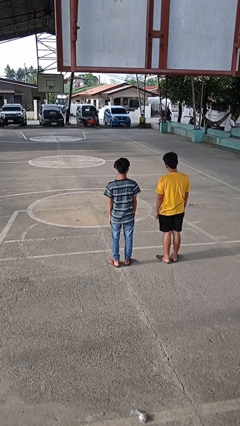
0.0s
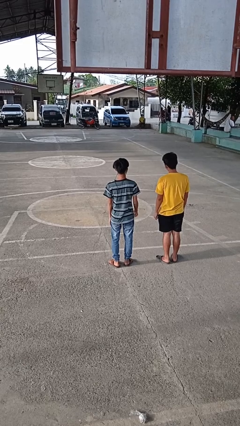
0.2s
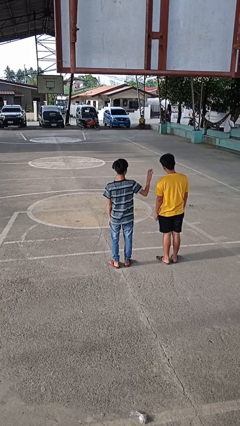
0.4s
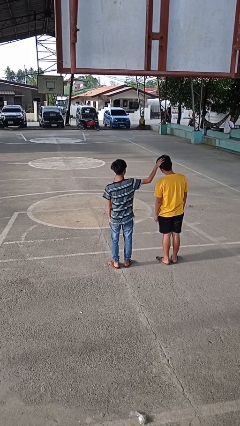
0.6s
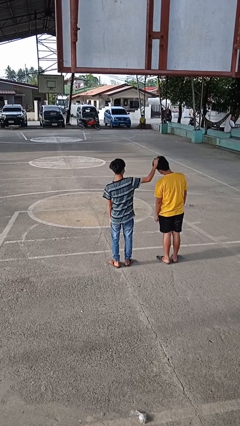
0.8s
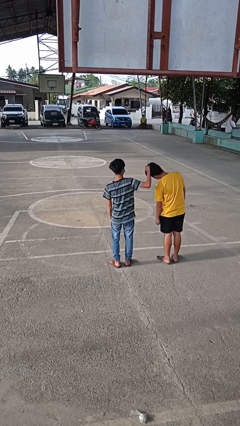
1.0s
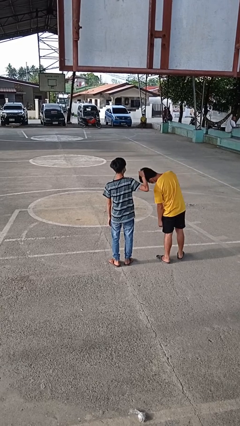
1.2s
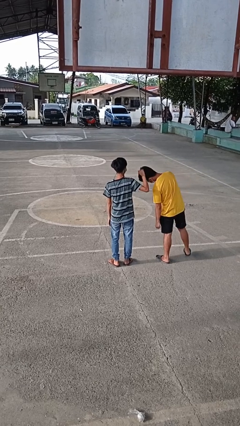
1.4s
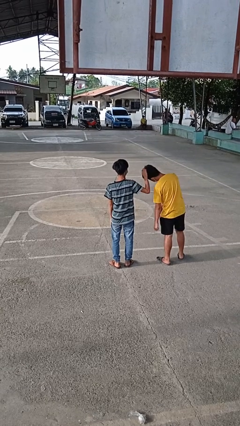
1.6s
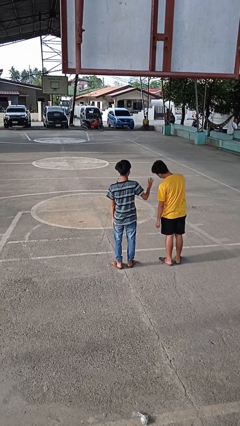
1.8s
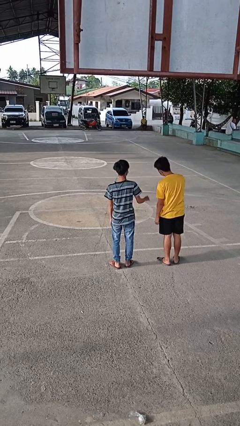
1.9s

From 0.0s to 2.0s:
person grabs person by hair

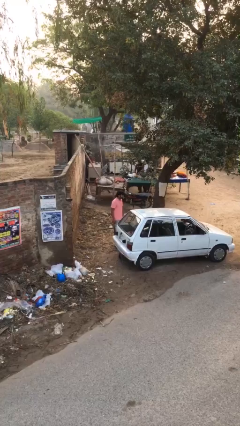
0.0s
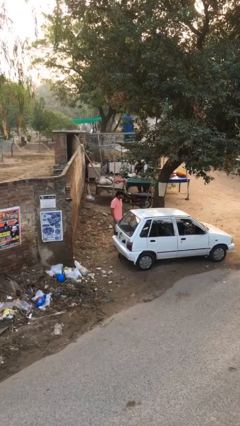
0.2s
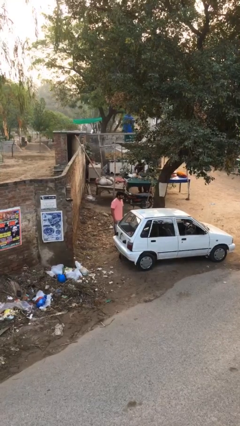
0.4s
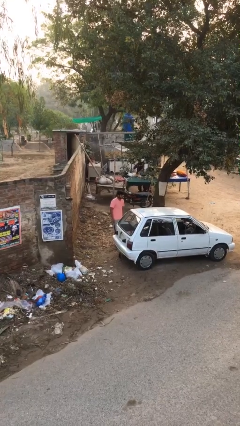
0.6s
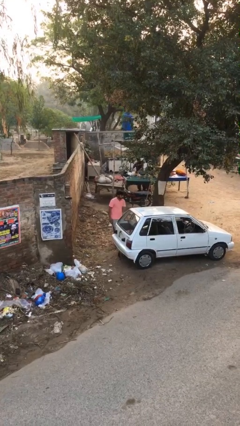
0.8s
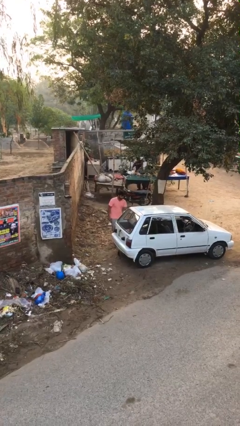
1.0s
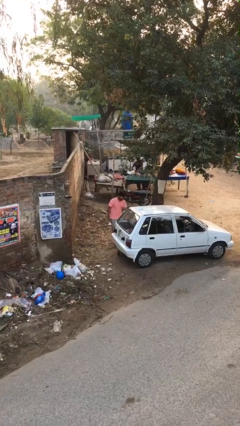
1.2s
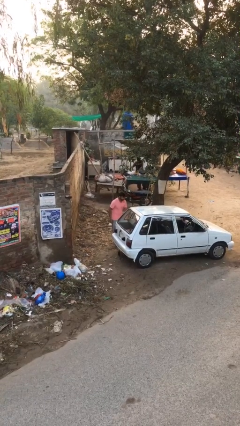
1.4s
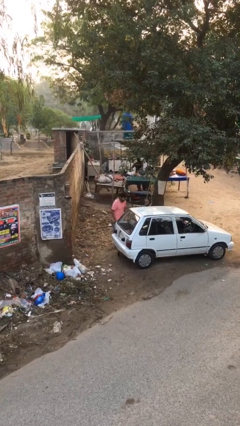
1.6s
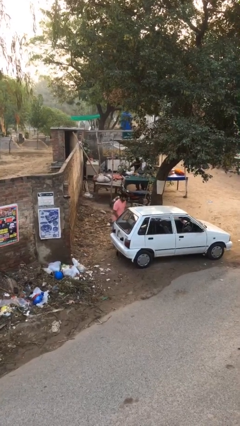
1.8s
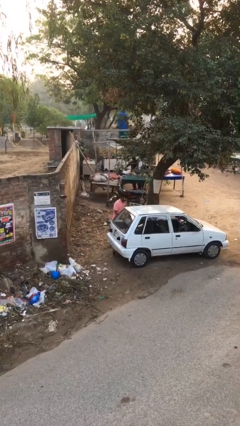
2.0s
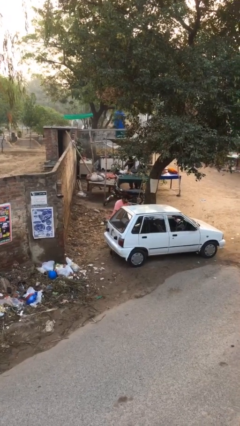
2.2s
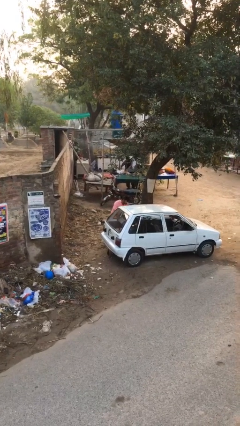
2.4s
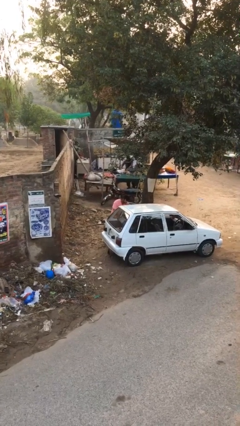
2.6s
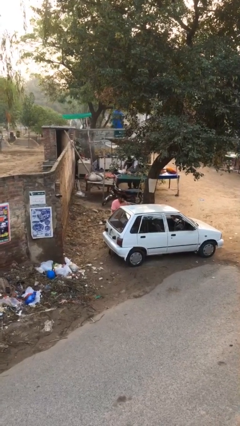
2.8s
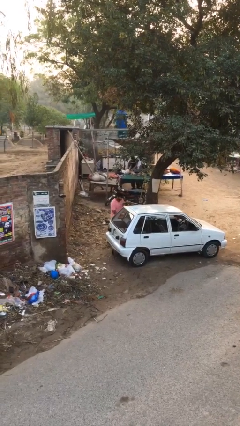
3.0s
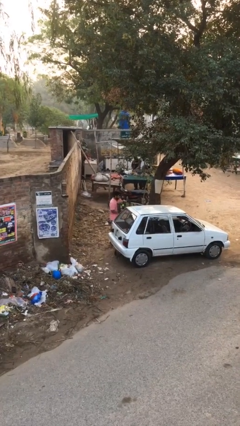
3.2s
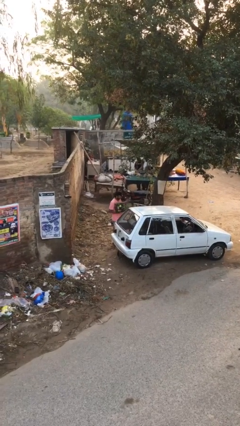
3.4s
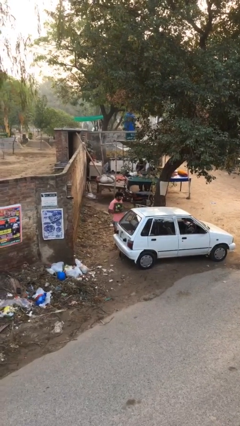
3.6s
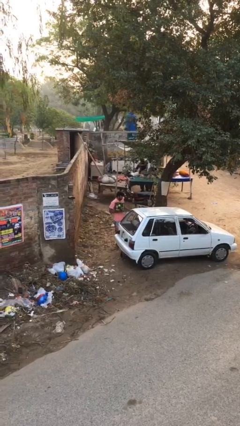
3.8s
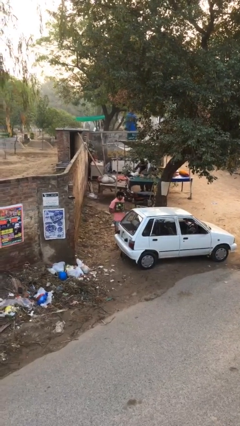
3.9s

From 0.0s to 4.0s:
person unloads car

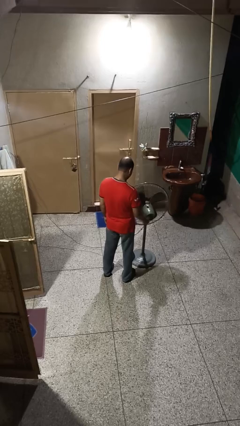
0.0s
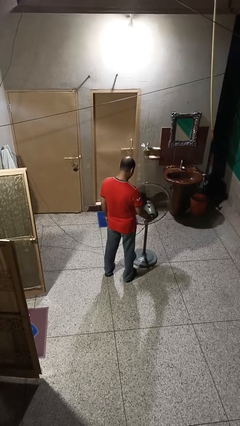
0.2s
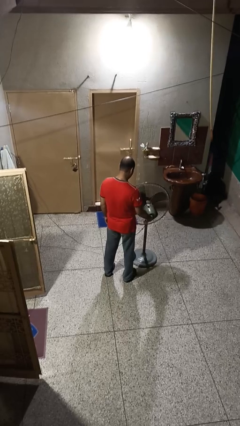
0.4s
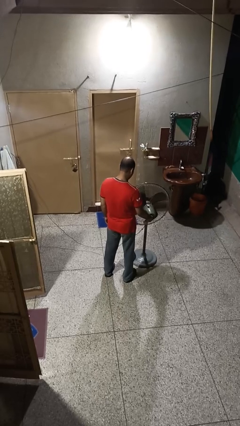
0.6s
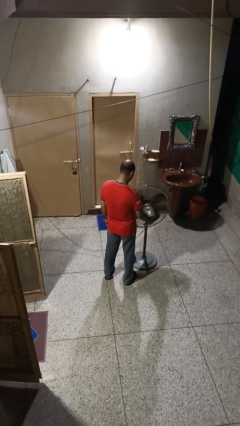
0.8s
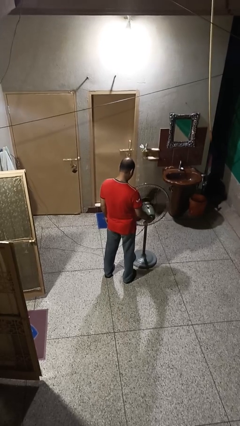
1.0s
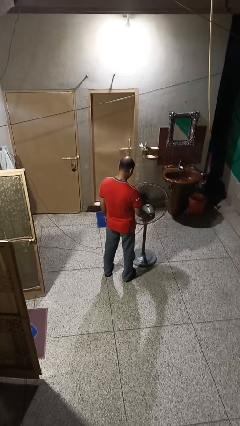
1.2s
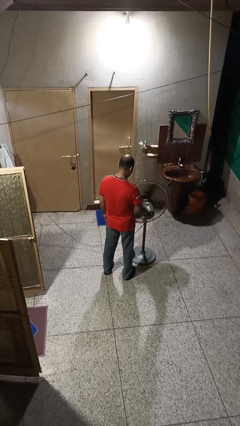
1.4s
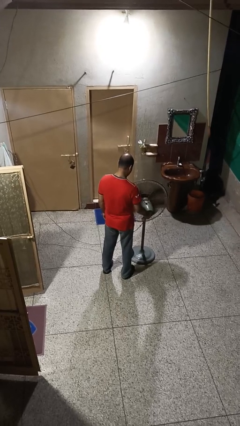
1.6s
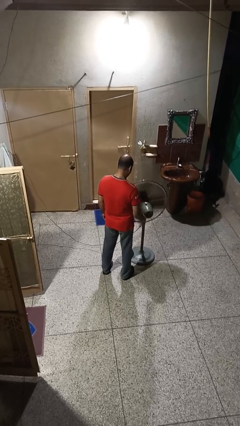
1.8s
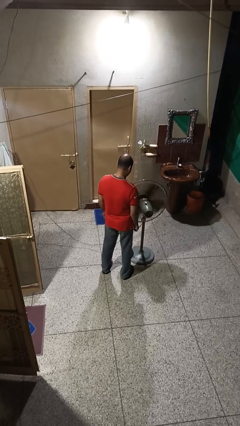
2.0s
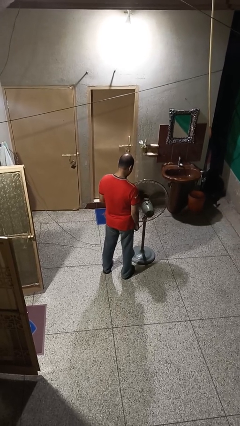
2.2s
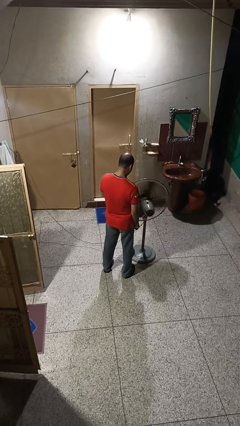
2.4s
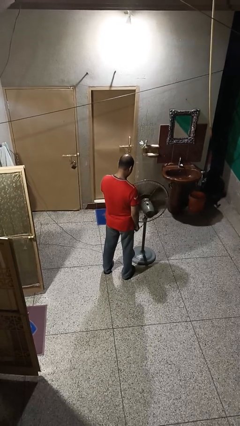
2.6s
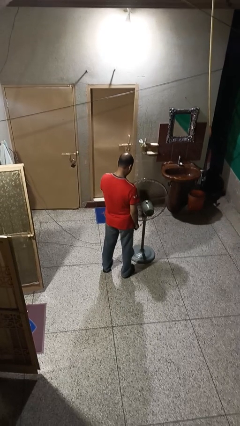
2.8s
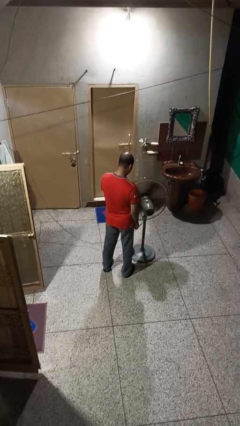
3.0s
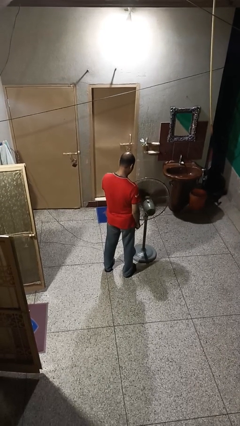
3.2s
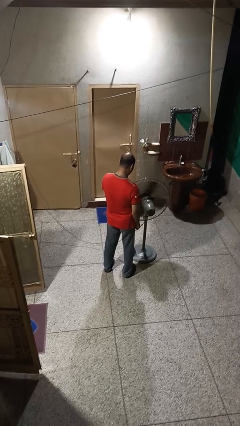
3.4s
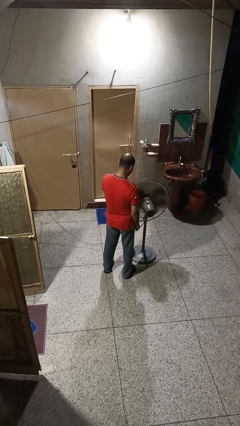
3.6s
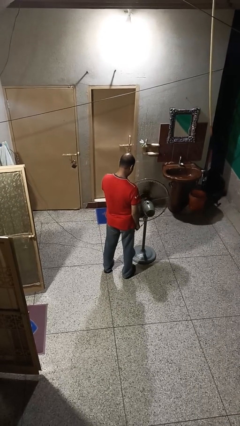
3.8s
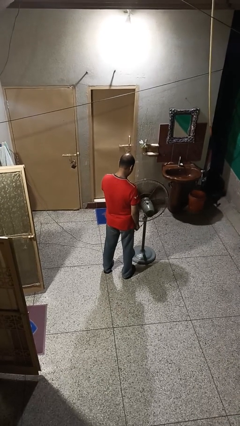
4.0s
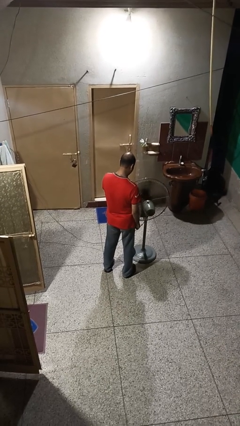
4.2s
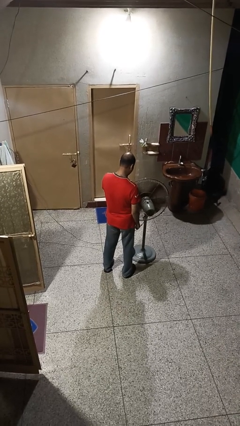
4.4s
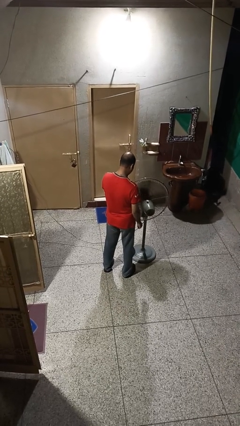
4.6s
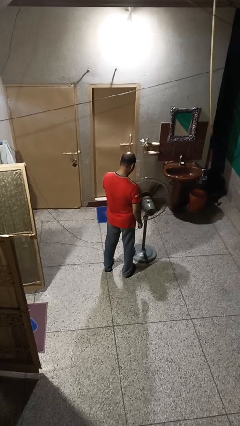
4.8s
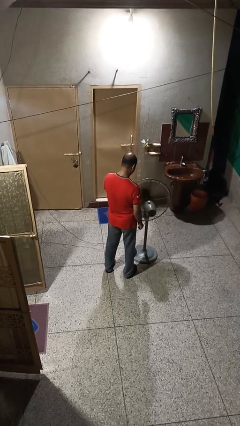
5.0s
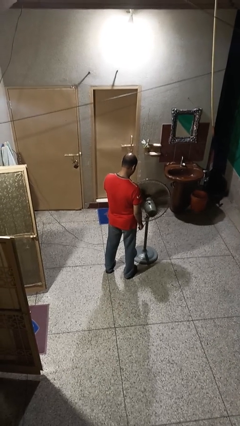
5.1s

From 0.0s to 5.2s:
person turns on fan

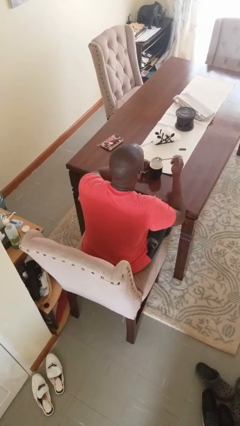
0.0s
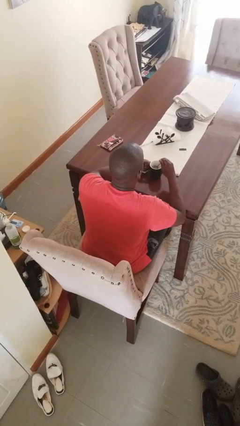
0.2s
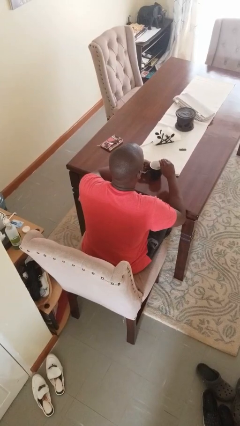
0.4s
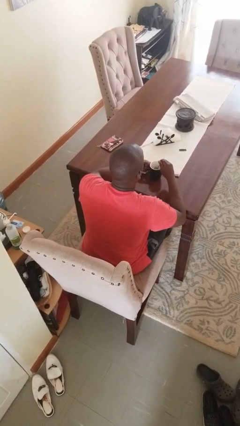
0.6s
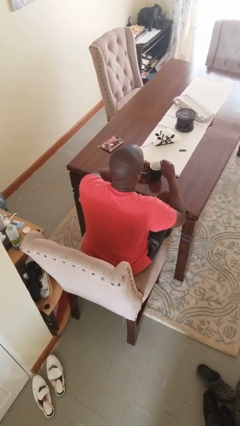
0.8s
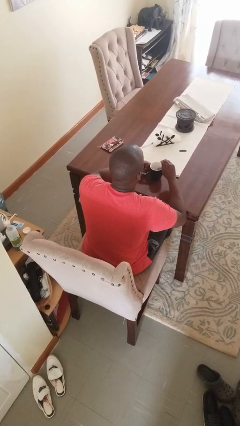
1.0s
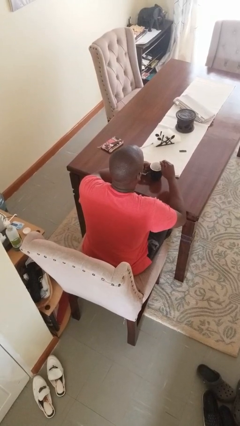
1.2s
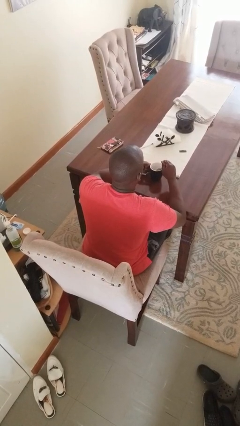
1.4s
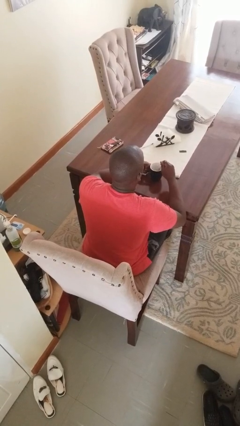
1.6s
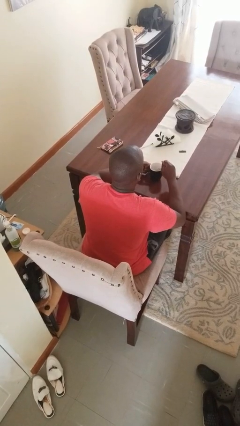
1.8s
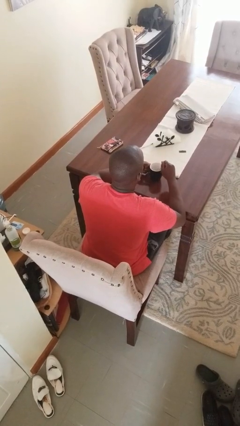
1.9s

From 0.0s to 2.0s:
person stirs mug

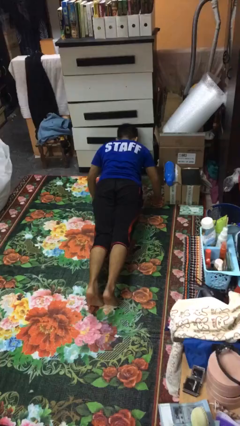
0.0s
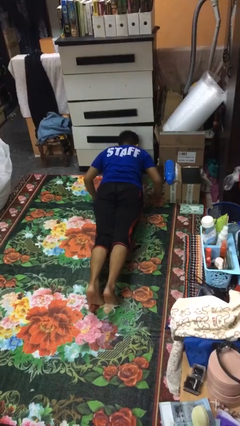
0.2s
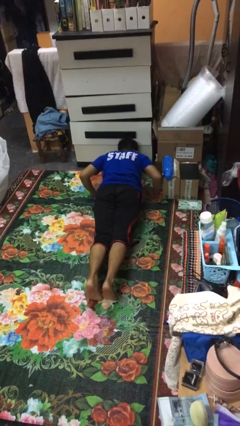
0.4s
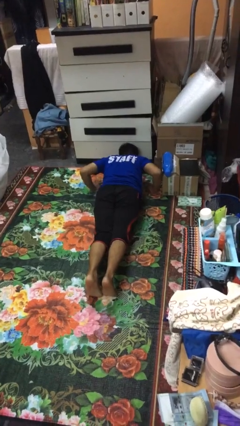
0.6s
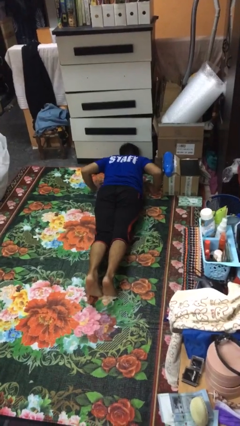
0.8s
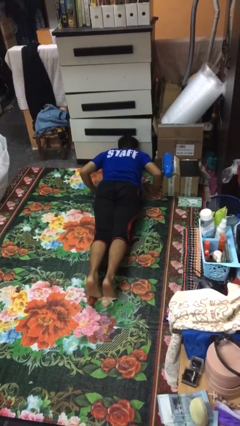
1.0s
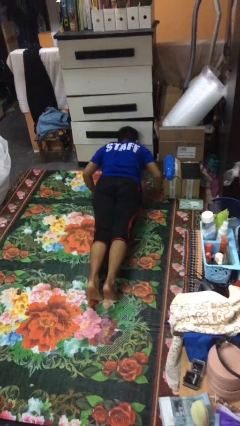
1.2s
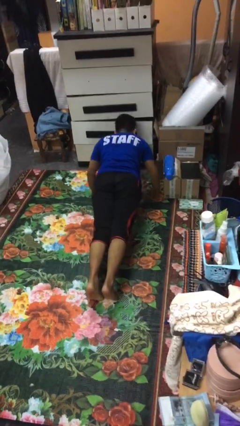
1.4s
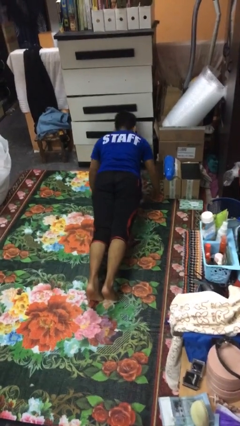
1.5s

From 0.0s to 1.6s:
person exercises with pushup

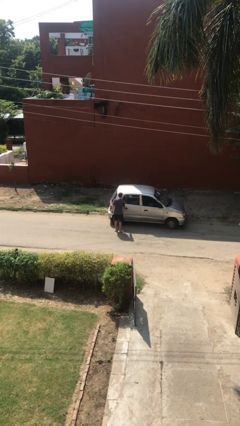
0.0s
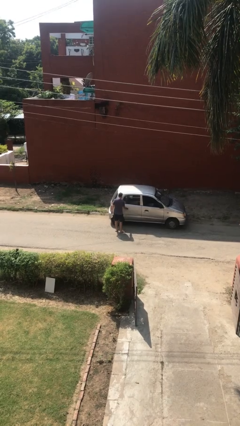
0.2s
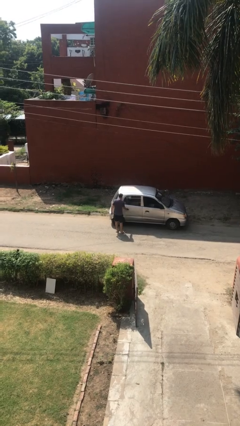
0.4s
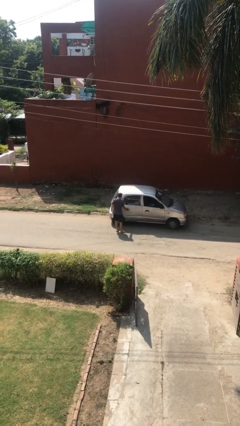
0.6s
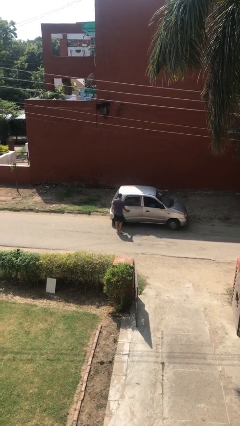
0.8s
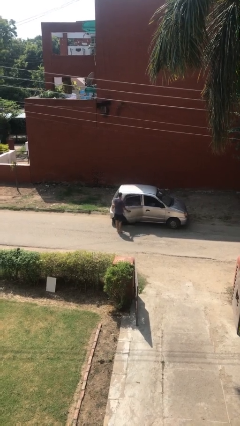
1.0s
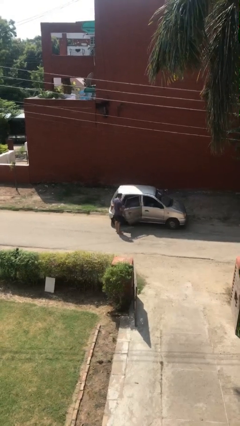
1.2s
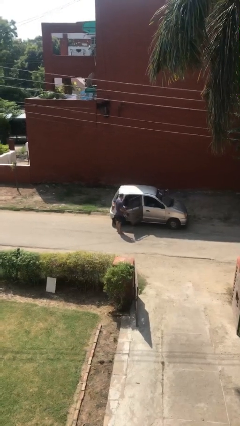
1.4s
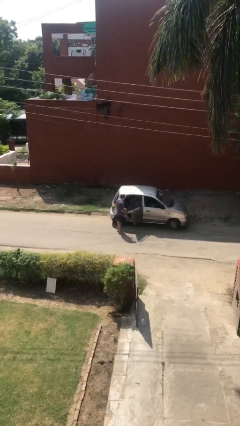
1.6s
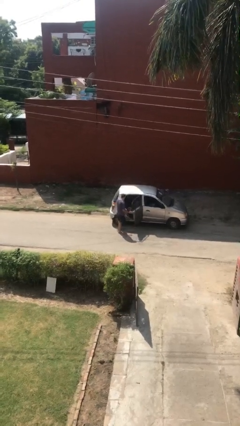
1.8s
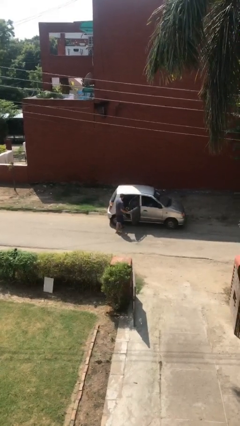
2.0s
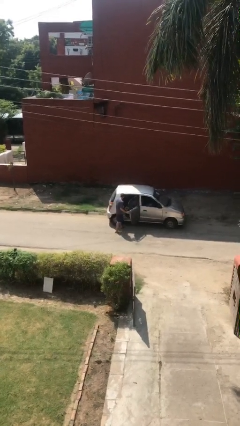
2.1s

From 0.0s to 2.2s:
person opens car door
